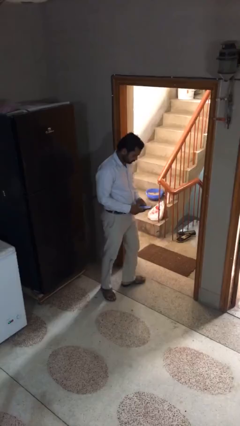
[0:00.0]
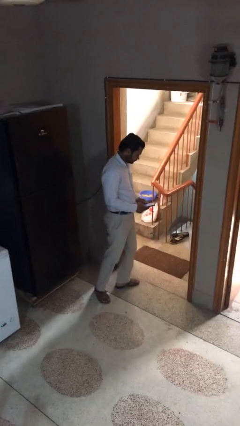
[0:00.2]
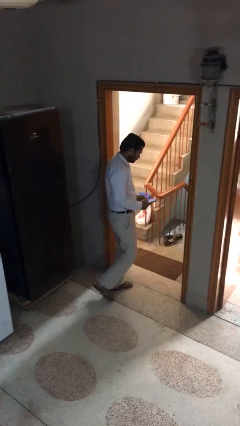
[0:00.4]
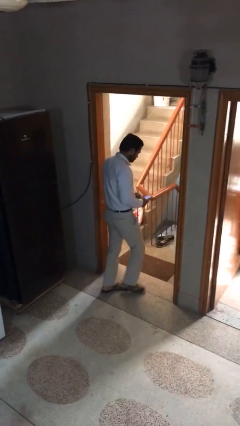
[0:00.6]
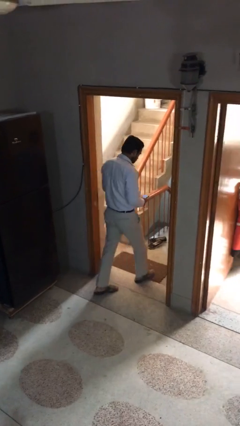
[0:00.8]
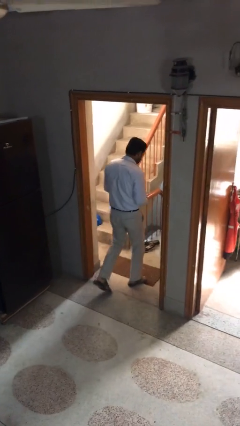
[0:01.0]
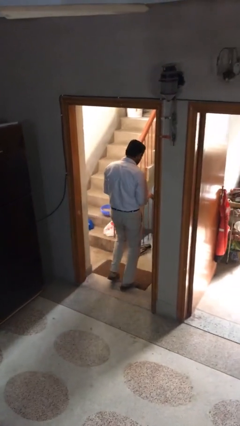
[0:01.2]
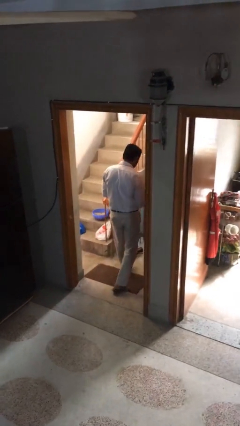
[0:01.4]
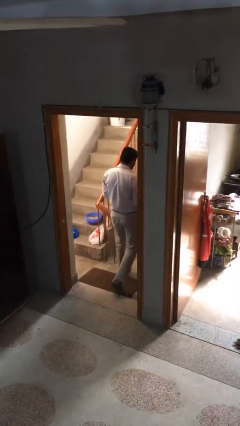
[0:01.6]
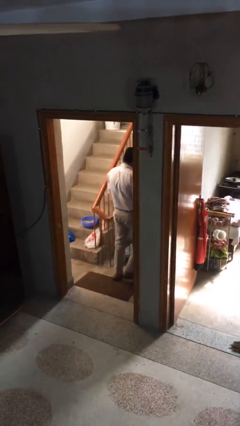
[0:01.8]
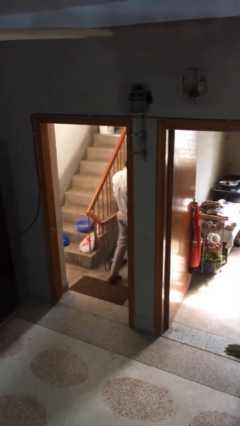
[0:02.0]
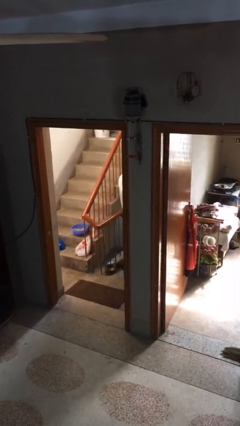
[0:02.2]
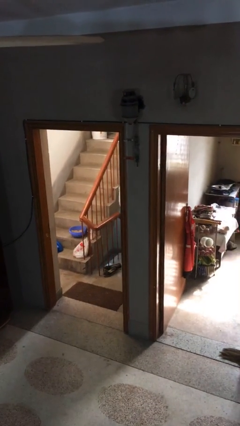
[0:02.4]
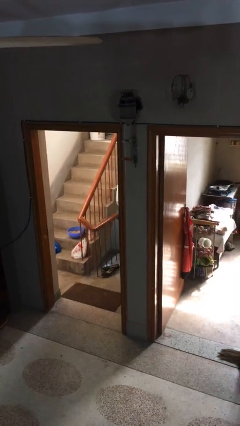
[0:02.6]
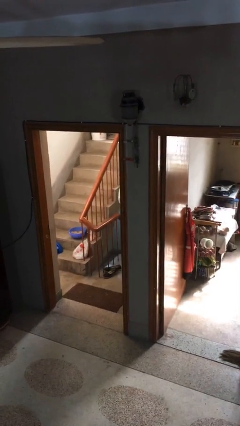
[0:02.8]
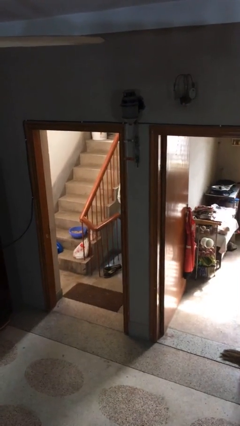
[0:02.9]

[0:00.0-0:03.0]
person exits scene through structure

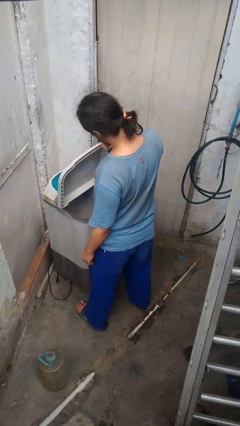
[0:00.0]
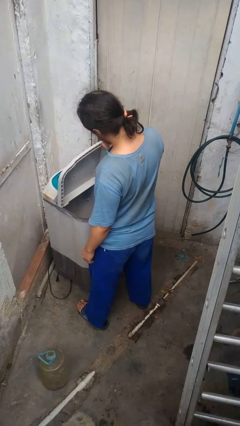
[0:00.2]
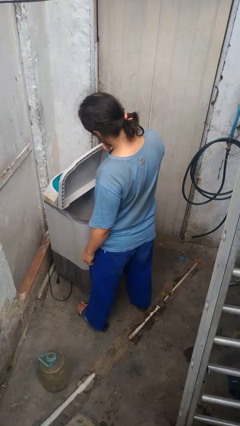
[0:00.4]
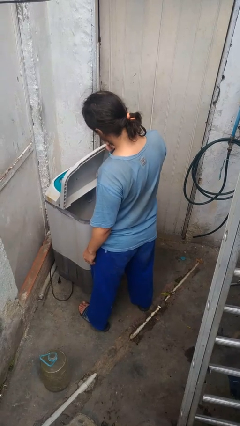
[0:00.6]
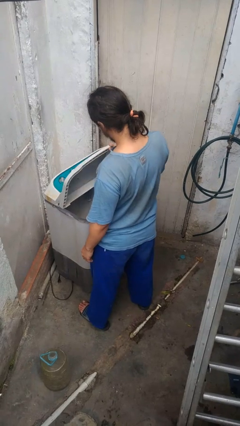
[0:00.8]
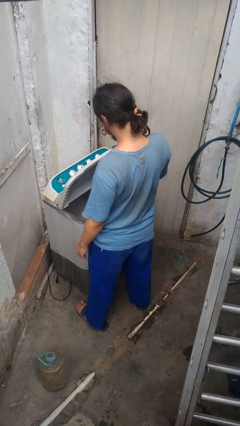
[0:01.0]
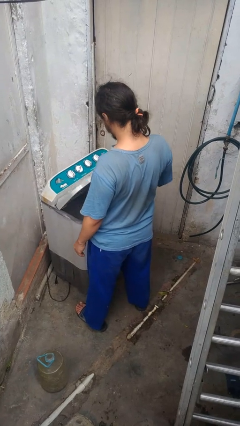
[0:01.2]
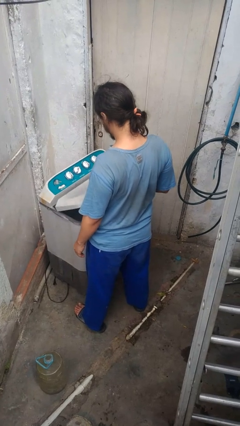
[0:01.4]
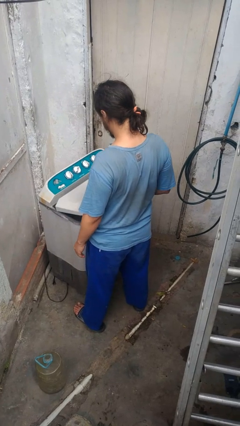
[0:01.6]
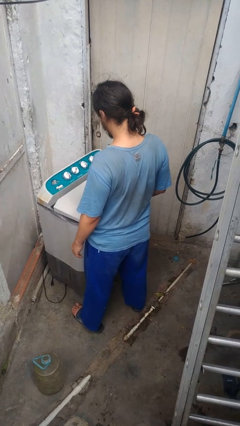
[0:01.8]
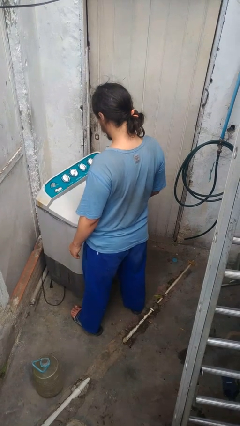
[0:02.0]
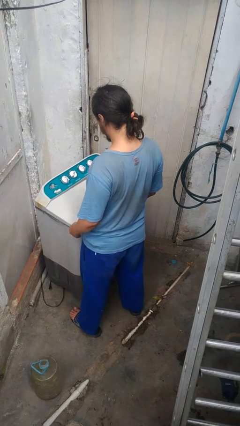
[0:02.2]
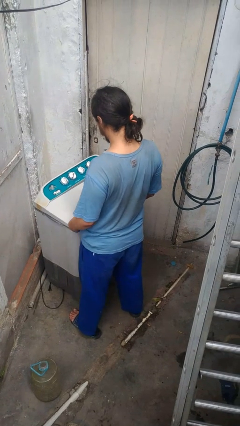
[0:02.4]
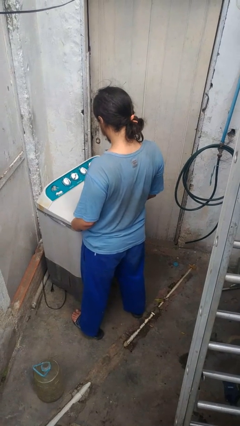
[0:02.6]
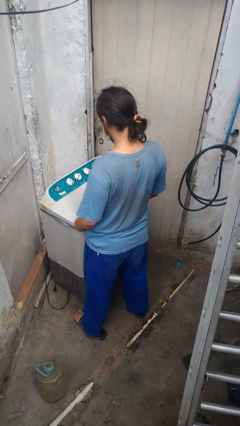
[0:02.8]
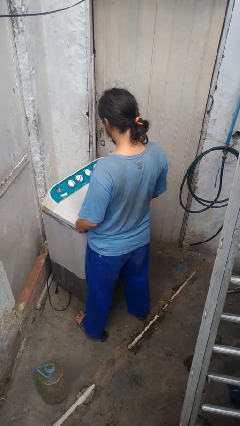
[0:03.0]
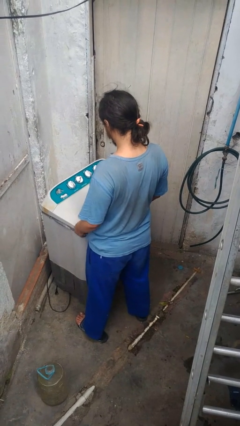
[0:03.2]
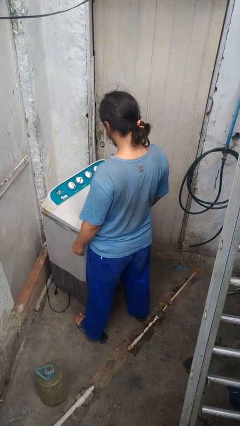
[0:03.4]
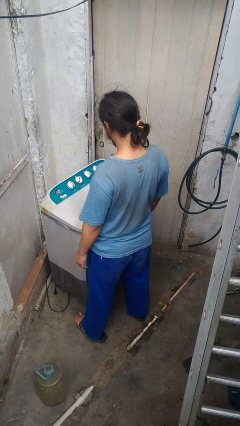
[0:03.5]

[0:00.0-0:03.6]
person closes clothes washer

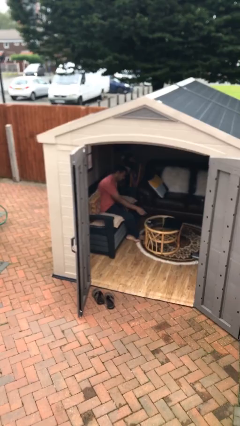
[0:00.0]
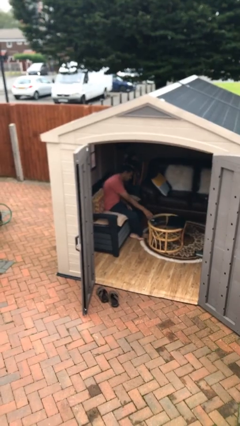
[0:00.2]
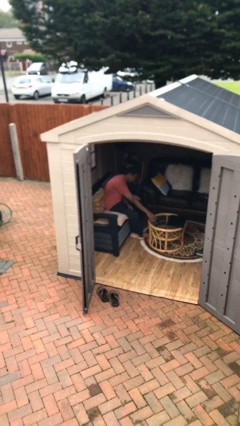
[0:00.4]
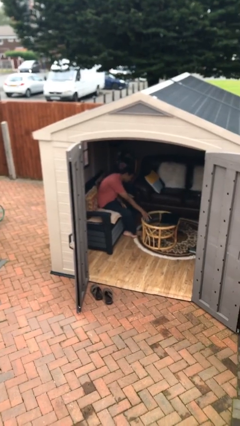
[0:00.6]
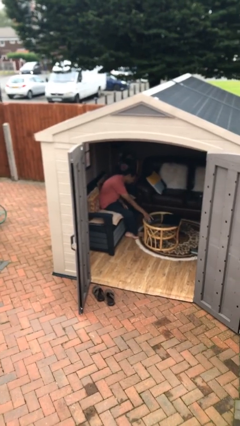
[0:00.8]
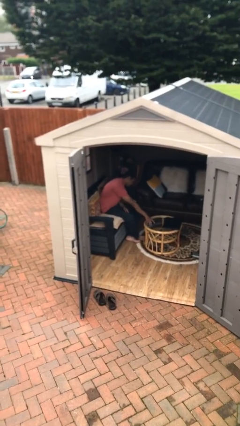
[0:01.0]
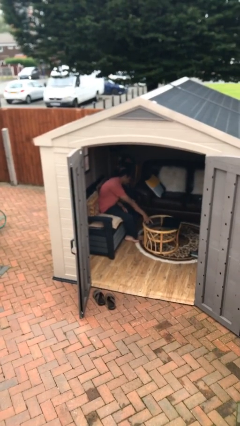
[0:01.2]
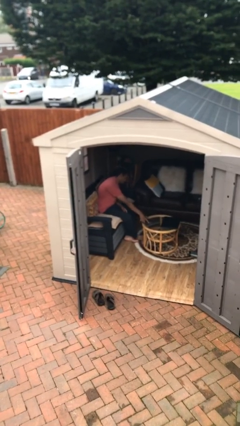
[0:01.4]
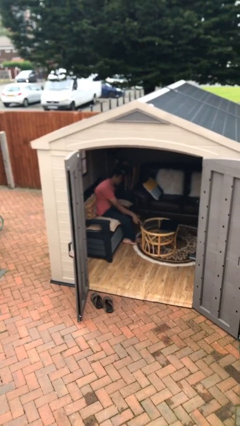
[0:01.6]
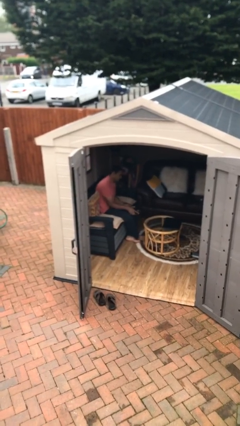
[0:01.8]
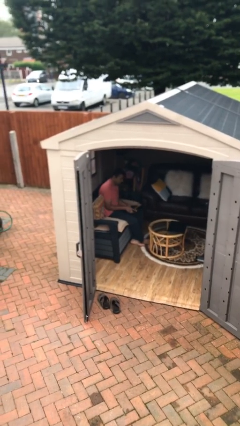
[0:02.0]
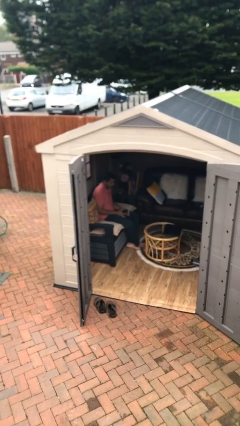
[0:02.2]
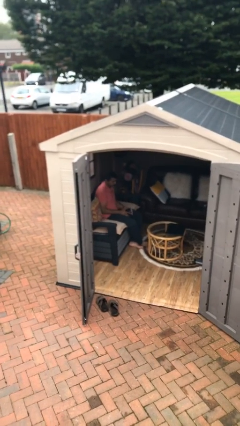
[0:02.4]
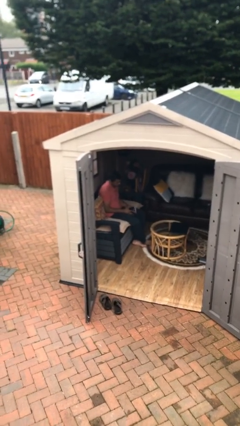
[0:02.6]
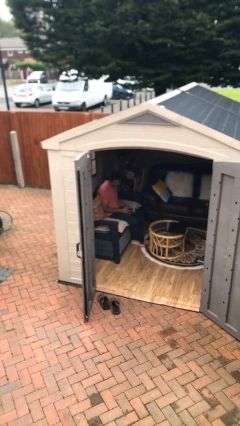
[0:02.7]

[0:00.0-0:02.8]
person picks up object from table

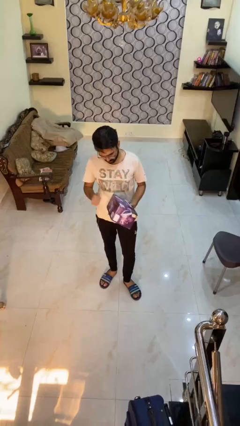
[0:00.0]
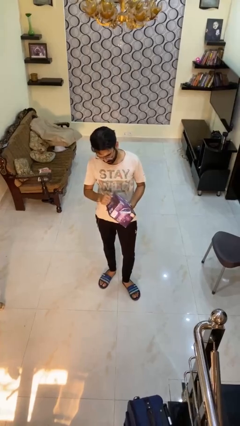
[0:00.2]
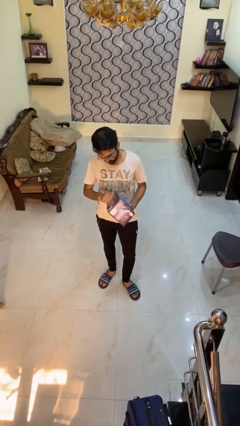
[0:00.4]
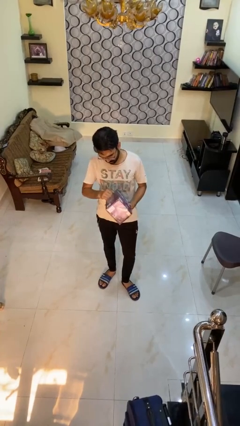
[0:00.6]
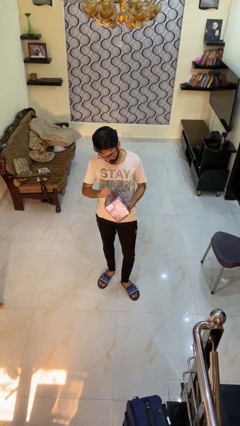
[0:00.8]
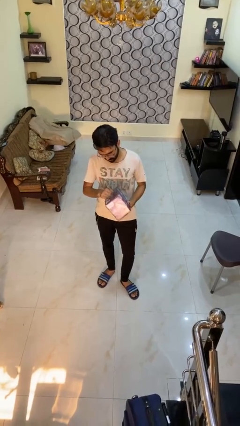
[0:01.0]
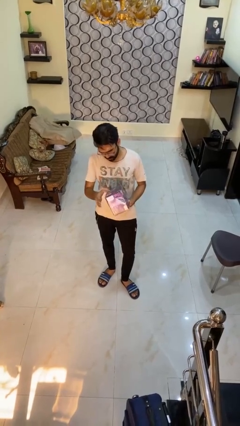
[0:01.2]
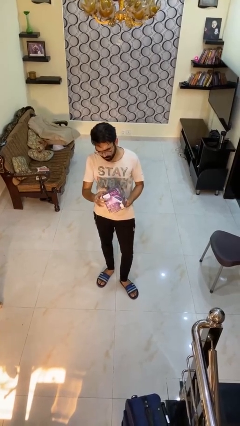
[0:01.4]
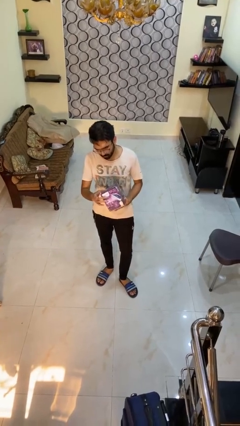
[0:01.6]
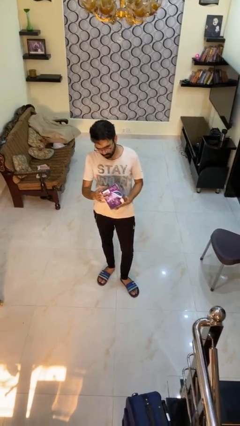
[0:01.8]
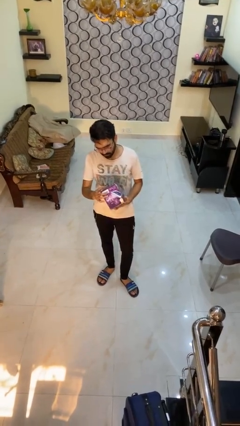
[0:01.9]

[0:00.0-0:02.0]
person taps object with finger

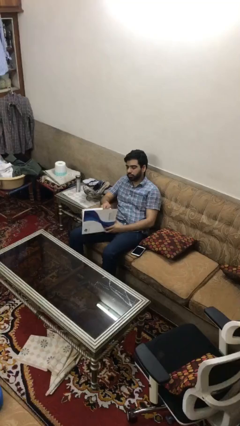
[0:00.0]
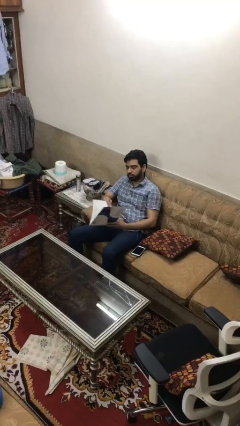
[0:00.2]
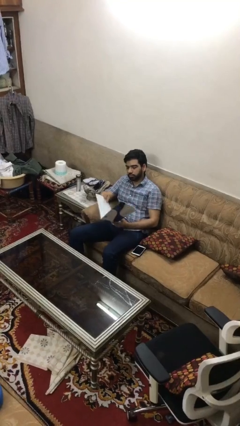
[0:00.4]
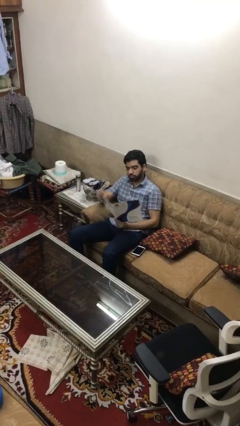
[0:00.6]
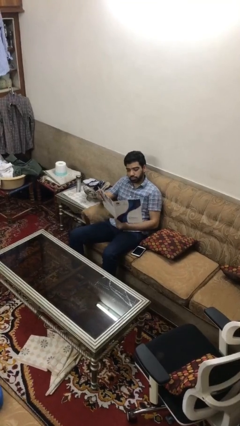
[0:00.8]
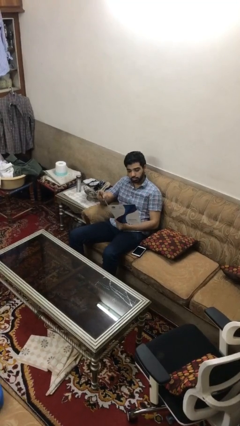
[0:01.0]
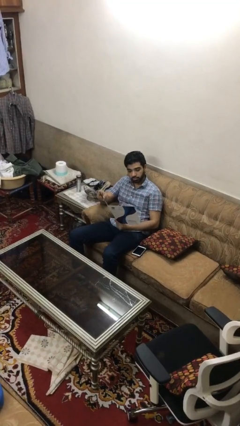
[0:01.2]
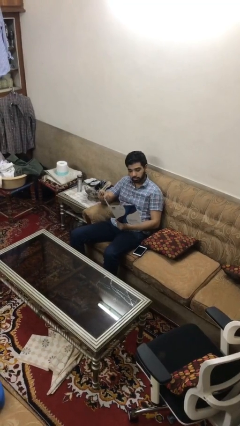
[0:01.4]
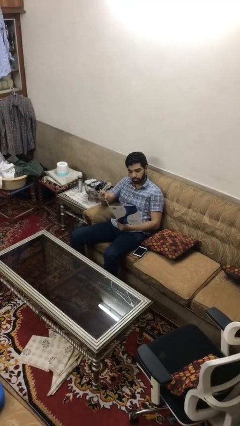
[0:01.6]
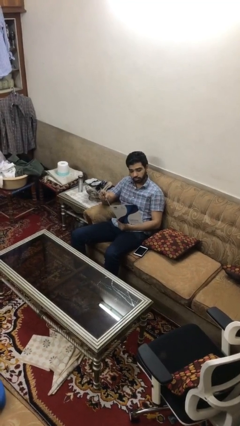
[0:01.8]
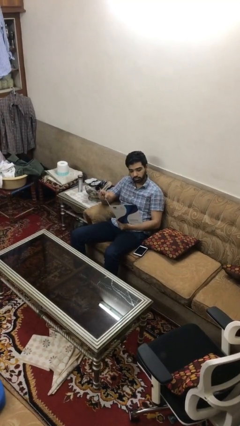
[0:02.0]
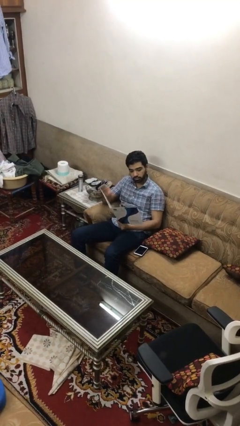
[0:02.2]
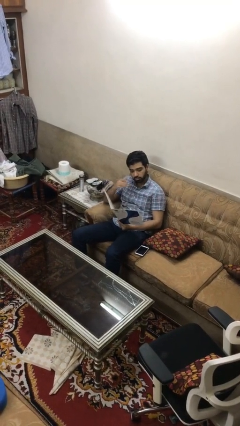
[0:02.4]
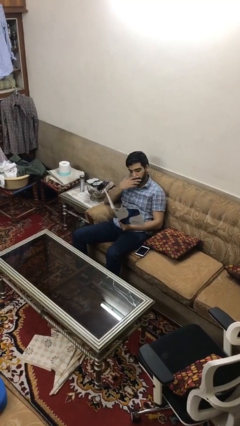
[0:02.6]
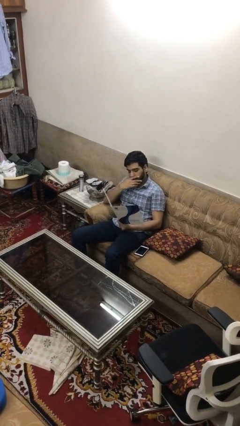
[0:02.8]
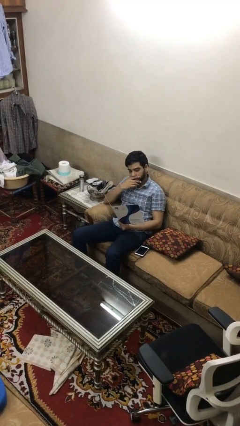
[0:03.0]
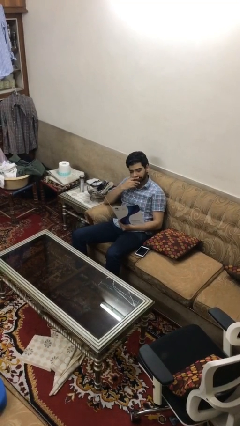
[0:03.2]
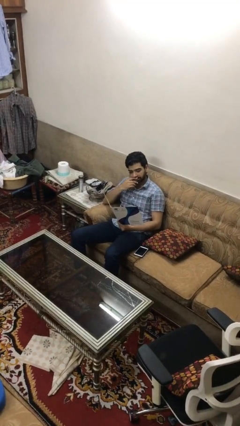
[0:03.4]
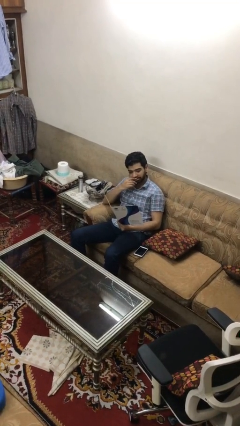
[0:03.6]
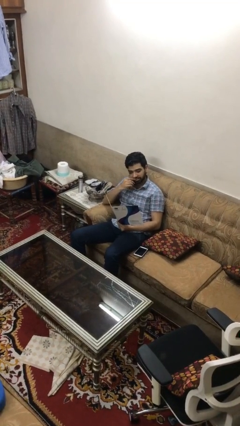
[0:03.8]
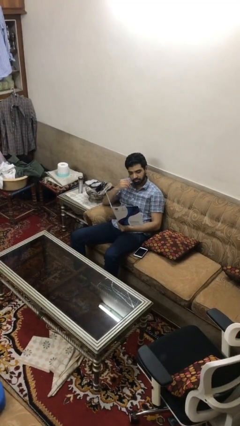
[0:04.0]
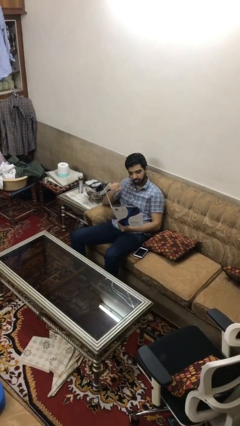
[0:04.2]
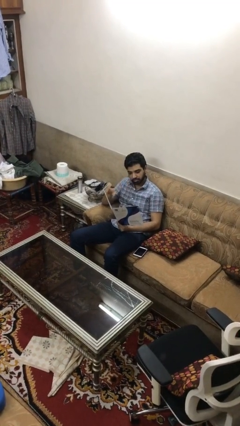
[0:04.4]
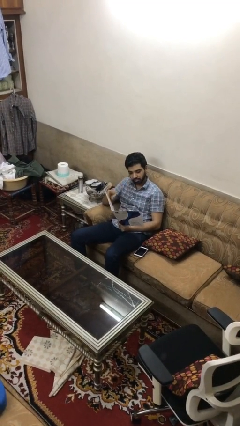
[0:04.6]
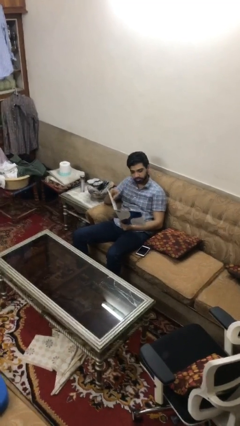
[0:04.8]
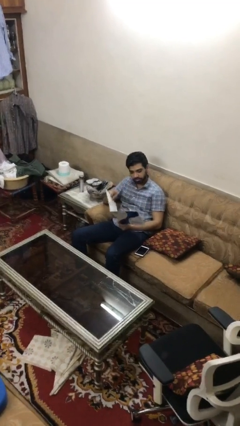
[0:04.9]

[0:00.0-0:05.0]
person reads document

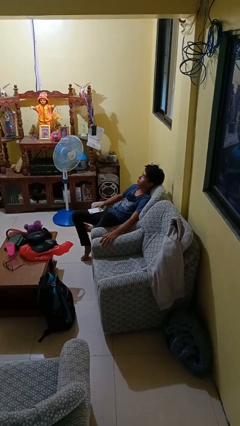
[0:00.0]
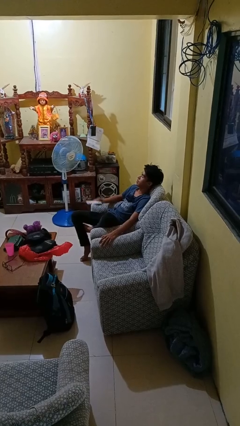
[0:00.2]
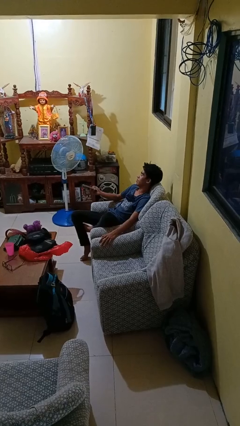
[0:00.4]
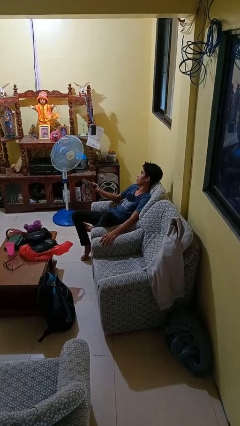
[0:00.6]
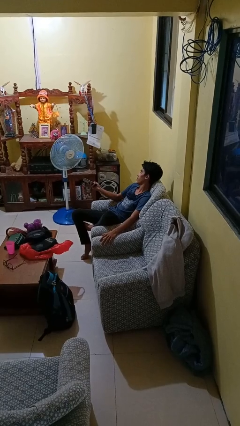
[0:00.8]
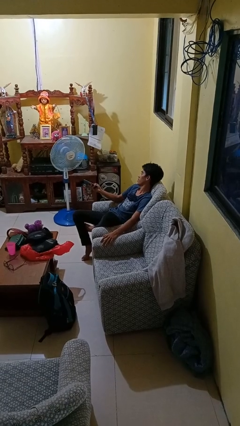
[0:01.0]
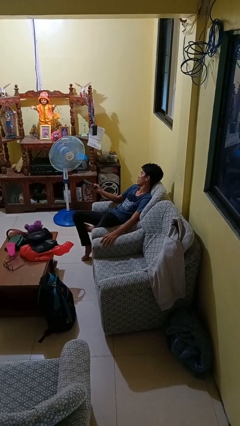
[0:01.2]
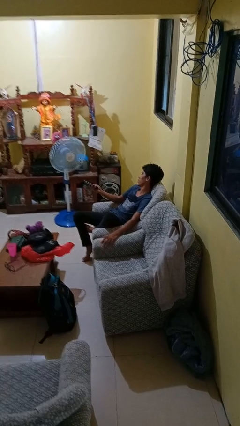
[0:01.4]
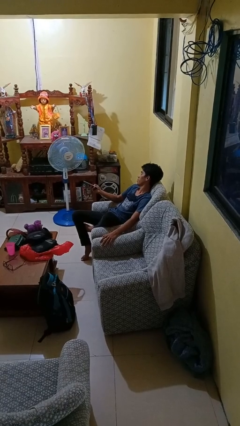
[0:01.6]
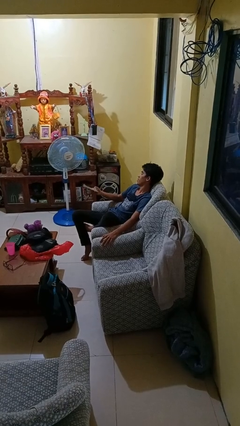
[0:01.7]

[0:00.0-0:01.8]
person uses television remote
